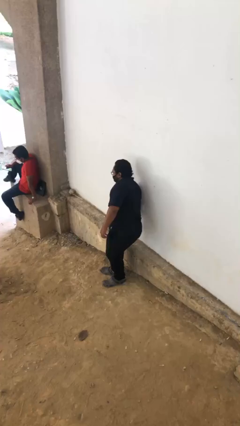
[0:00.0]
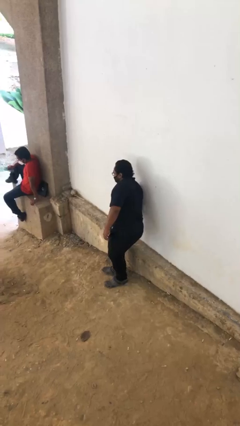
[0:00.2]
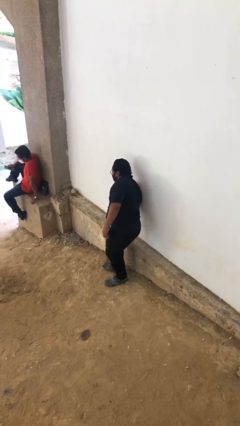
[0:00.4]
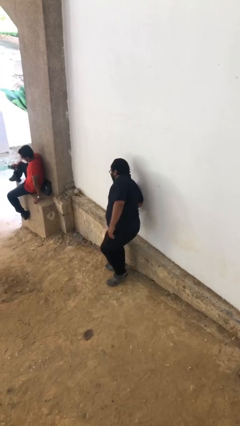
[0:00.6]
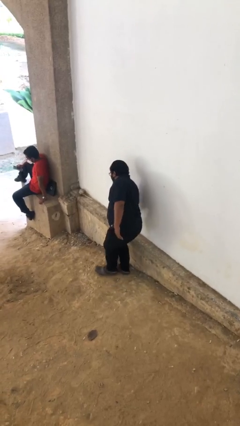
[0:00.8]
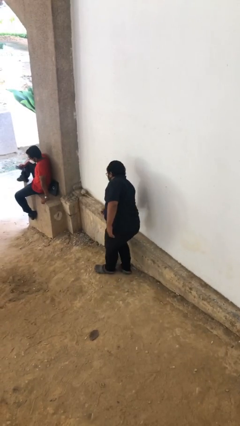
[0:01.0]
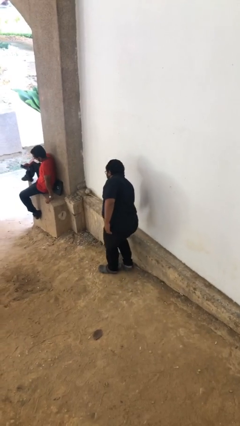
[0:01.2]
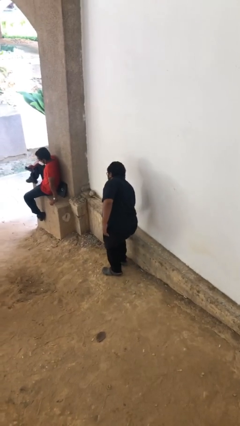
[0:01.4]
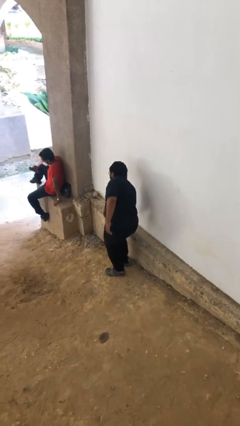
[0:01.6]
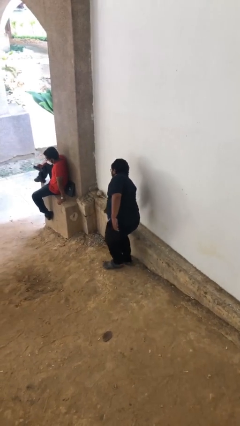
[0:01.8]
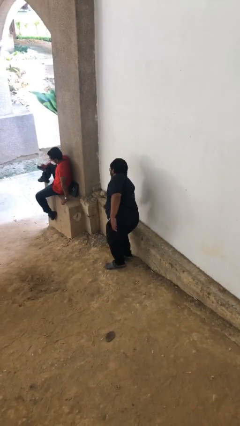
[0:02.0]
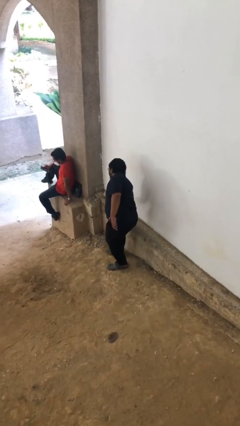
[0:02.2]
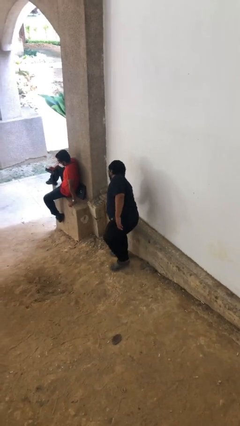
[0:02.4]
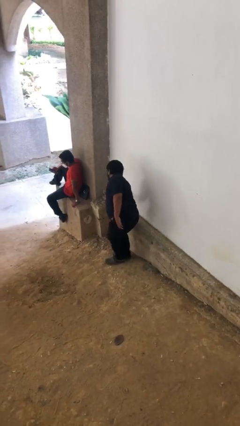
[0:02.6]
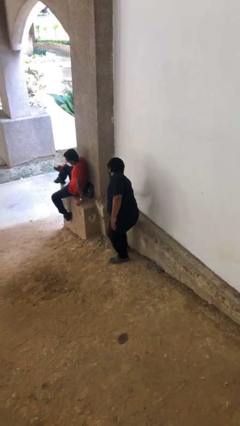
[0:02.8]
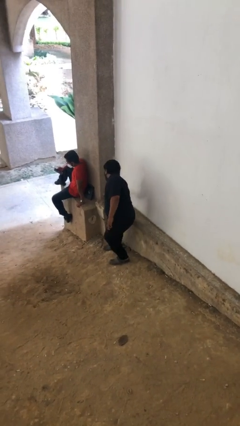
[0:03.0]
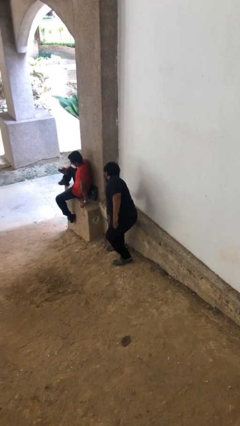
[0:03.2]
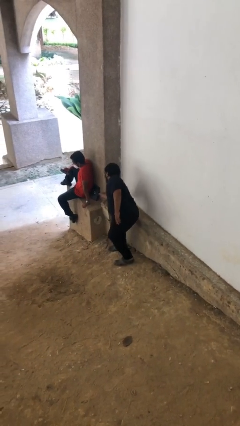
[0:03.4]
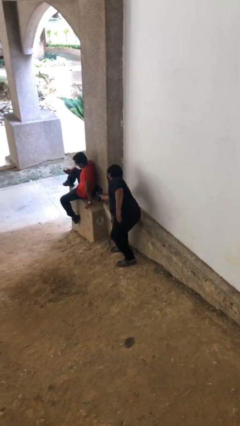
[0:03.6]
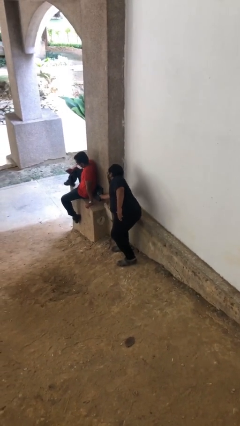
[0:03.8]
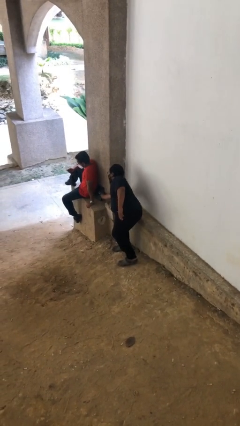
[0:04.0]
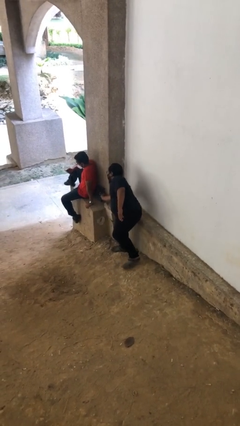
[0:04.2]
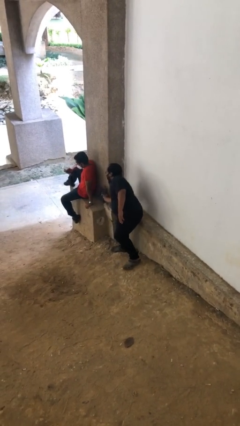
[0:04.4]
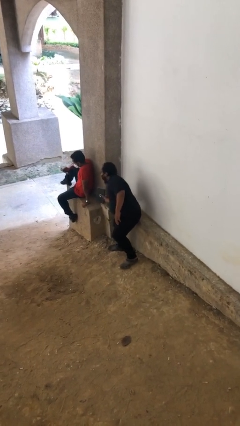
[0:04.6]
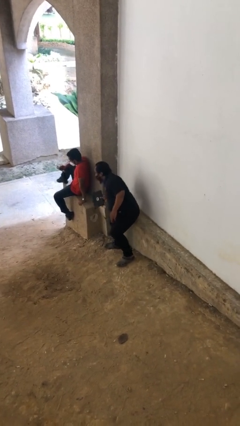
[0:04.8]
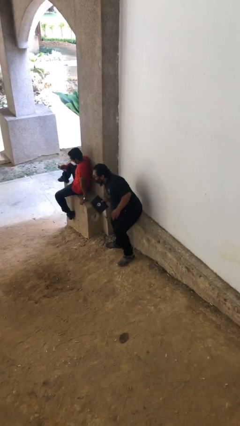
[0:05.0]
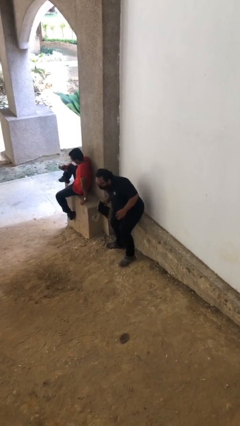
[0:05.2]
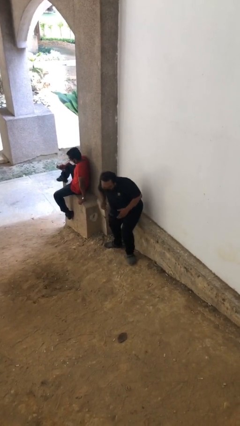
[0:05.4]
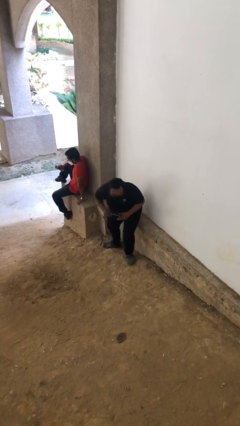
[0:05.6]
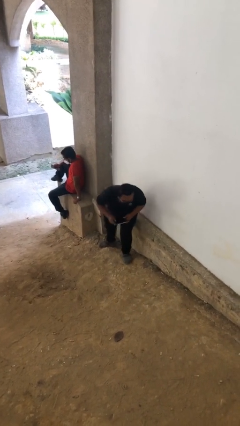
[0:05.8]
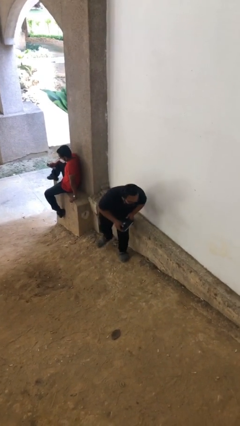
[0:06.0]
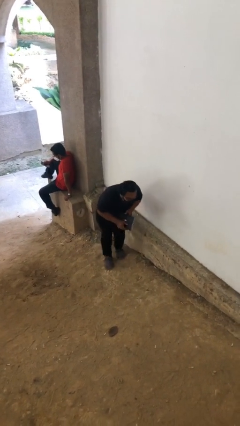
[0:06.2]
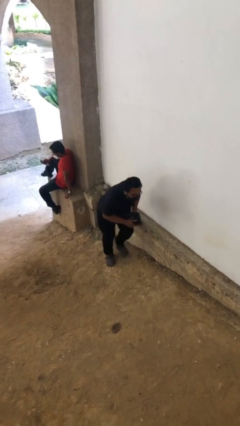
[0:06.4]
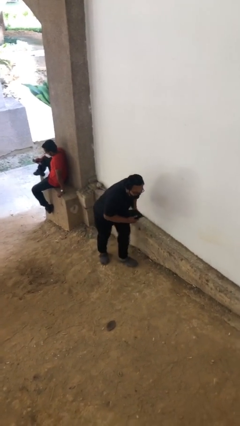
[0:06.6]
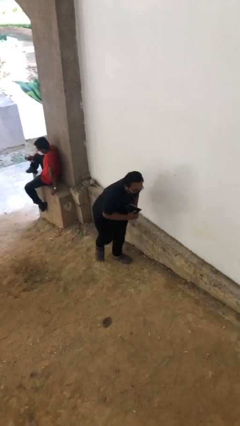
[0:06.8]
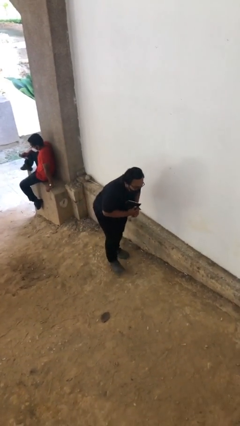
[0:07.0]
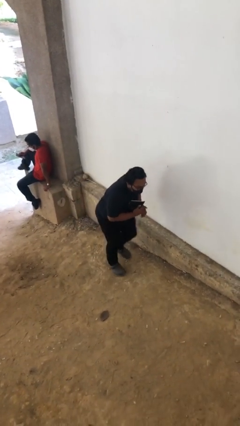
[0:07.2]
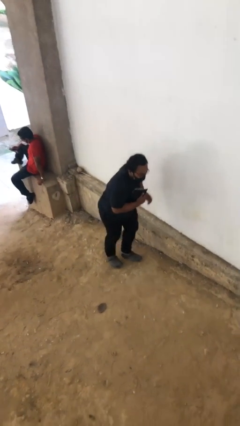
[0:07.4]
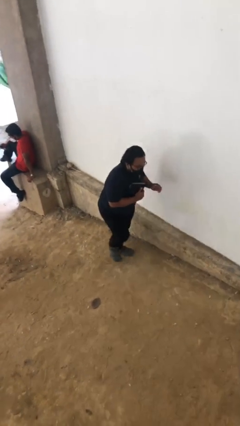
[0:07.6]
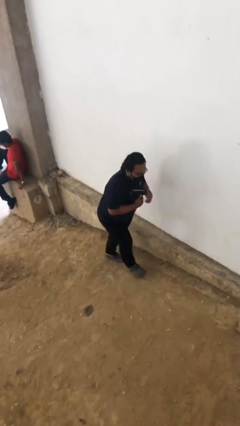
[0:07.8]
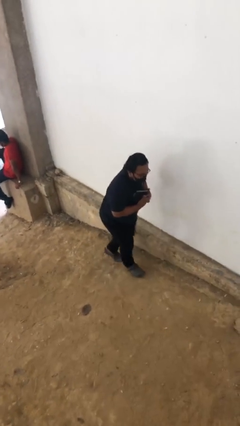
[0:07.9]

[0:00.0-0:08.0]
person steals object from person

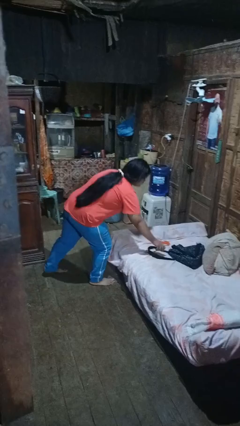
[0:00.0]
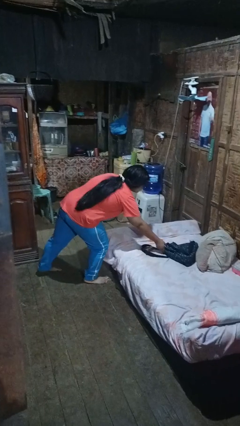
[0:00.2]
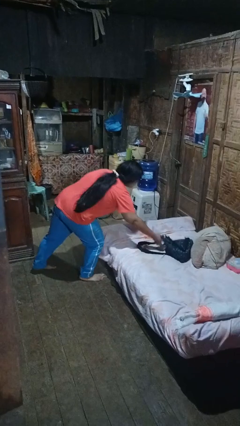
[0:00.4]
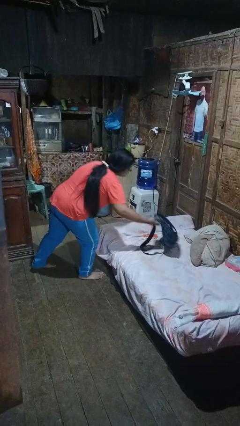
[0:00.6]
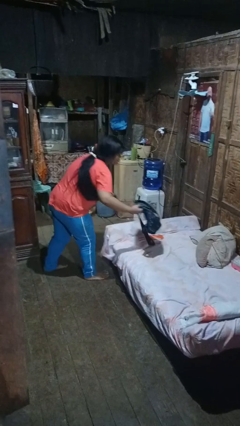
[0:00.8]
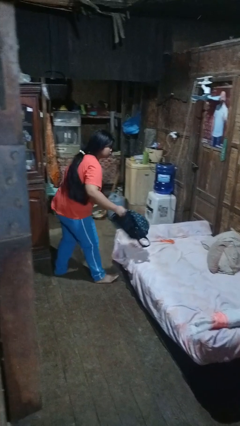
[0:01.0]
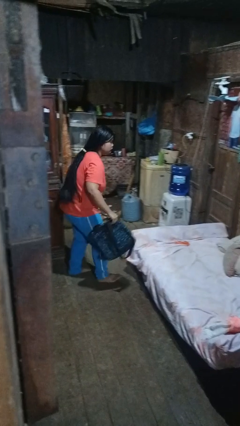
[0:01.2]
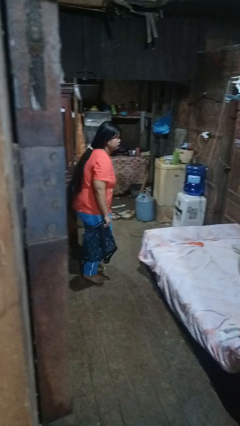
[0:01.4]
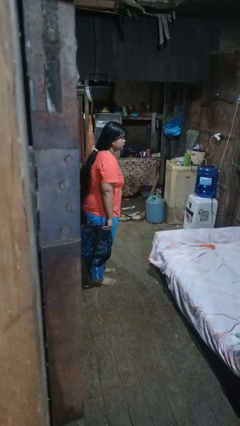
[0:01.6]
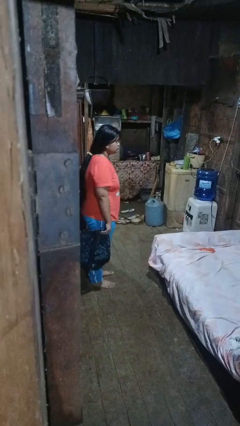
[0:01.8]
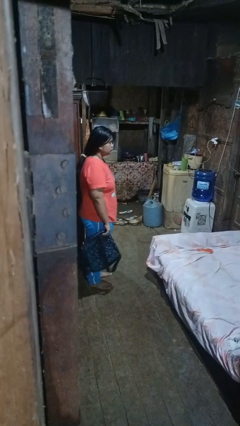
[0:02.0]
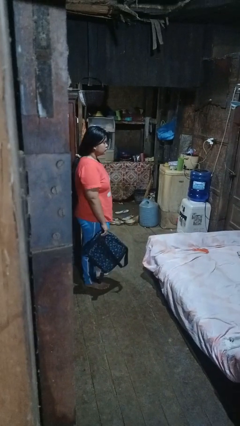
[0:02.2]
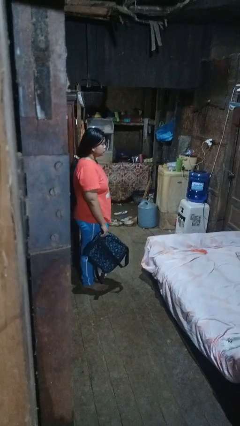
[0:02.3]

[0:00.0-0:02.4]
person picks up object from bed

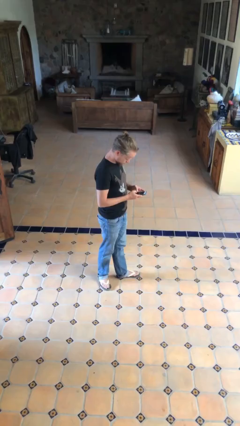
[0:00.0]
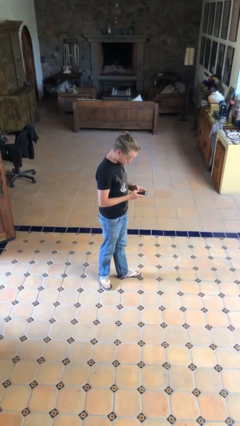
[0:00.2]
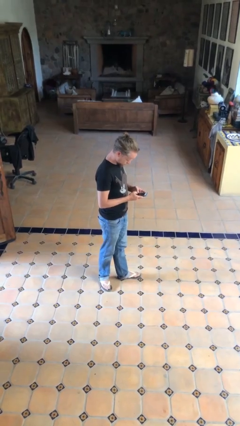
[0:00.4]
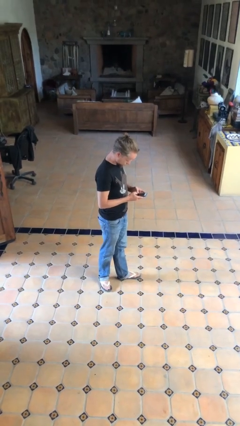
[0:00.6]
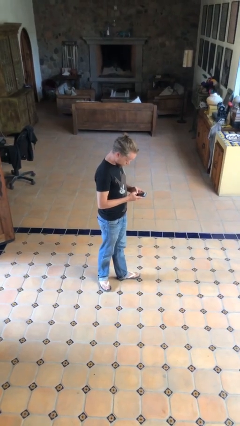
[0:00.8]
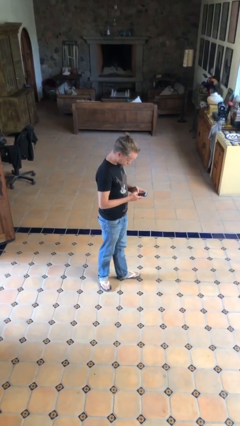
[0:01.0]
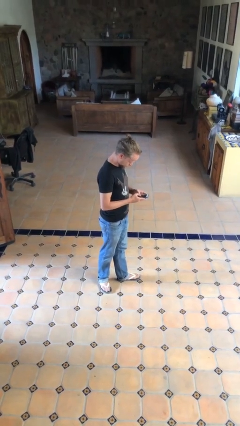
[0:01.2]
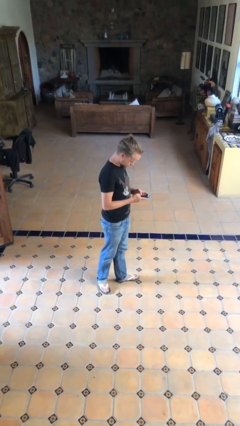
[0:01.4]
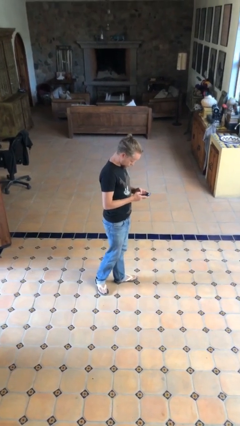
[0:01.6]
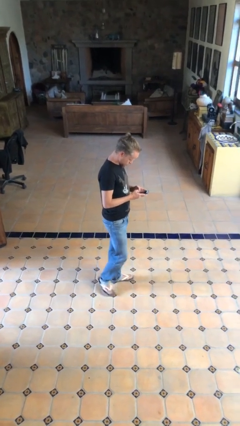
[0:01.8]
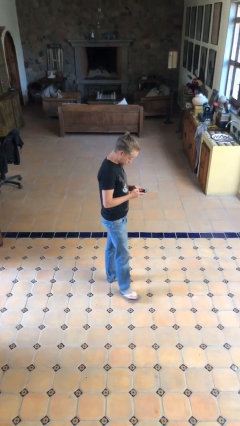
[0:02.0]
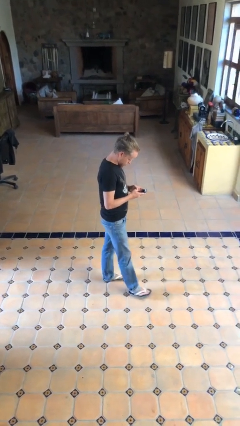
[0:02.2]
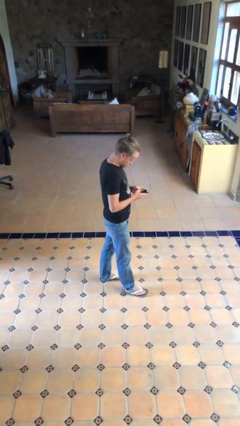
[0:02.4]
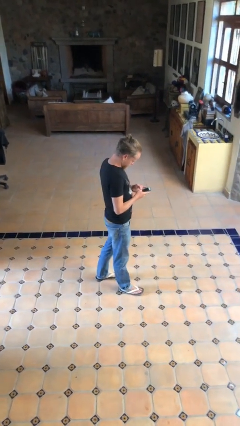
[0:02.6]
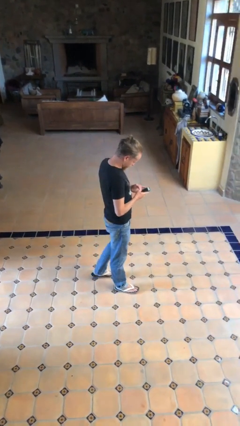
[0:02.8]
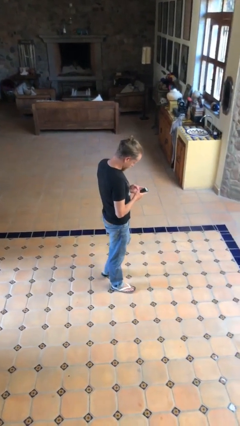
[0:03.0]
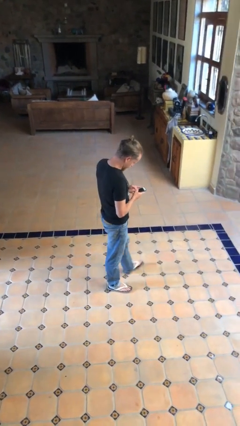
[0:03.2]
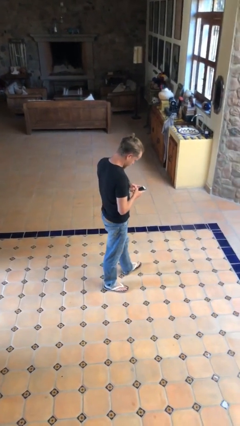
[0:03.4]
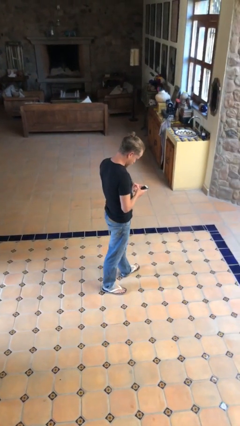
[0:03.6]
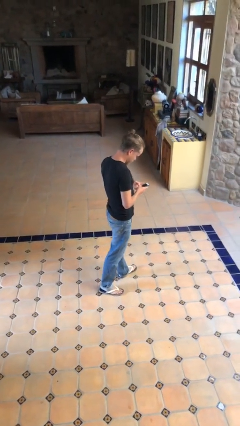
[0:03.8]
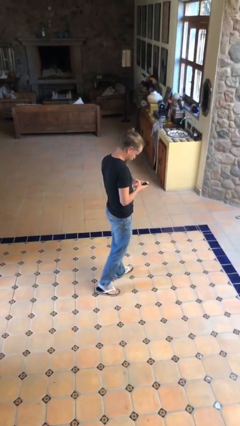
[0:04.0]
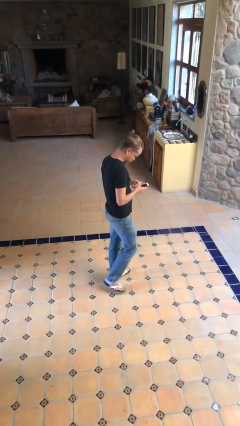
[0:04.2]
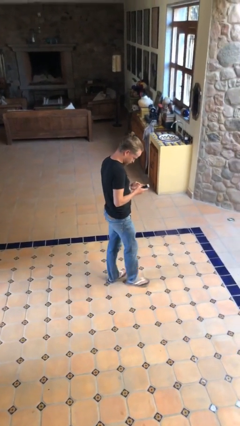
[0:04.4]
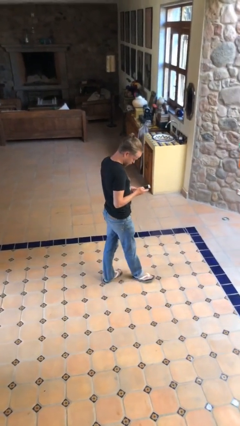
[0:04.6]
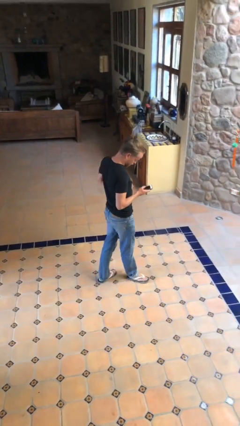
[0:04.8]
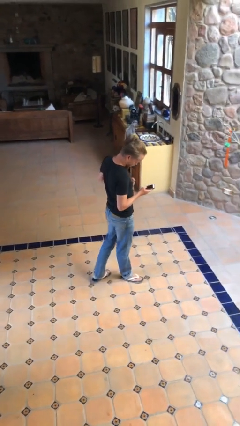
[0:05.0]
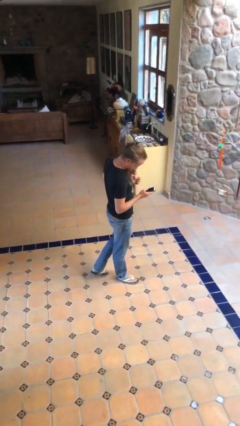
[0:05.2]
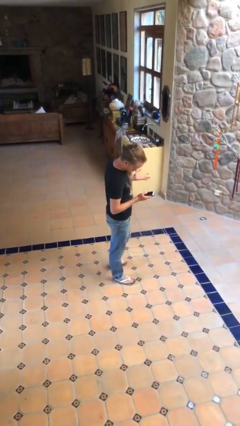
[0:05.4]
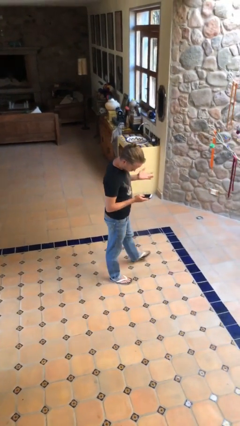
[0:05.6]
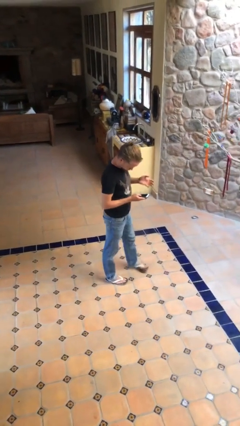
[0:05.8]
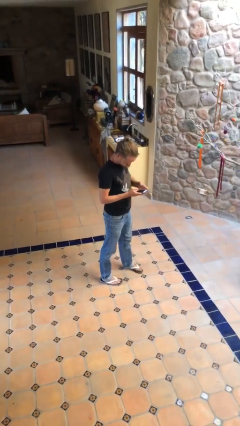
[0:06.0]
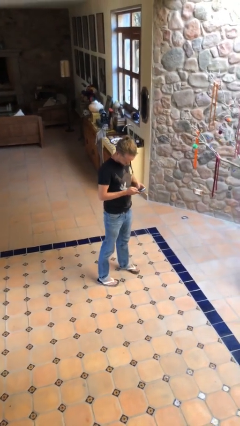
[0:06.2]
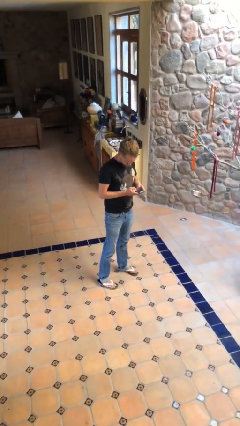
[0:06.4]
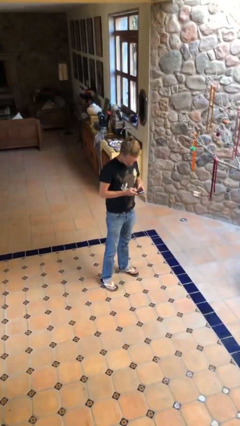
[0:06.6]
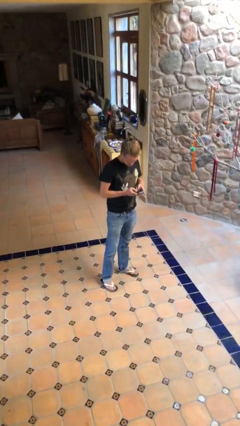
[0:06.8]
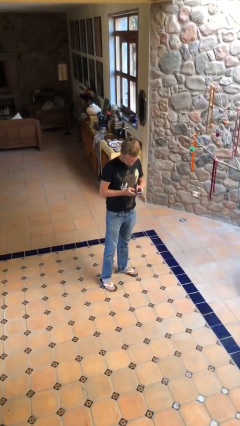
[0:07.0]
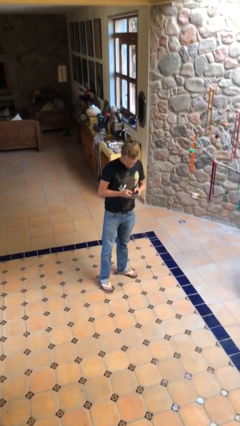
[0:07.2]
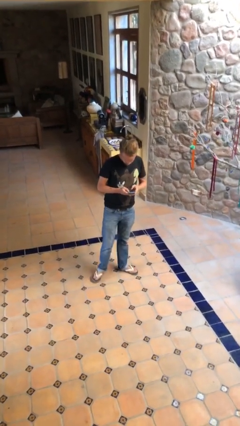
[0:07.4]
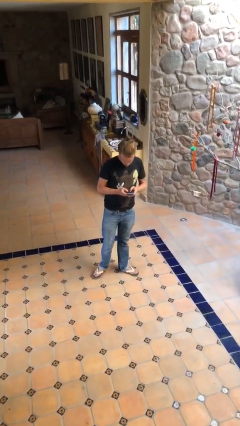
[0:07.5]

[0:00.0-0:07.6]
person texts on phone

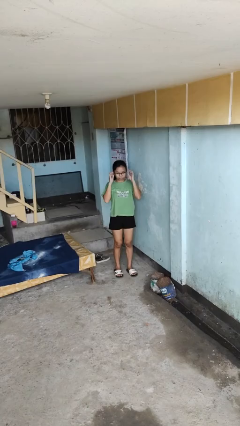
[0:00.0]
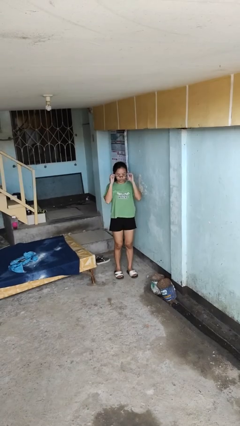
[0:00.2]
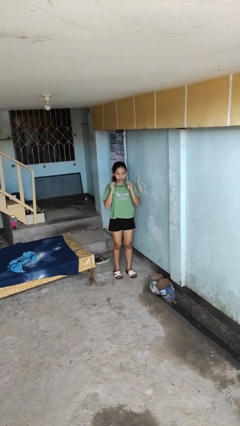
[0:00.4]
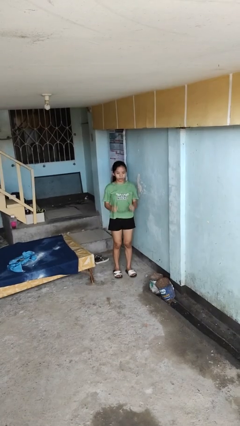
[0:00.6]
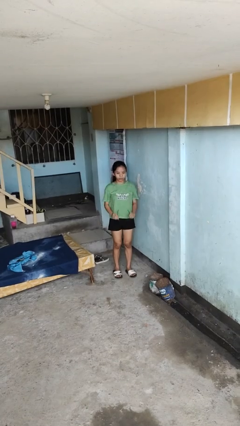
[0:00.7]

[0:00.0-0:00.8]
person takes off glasses
